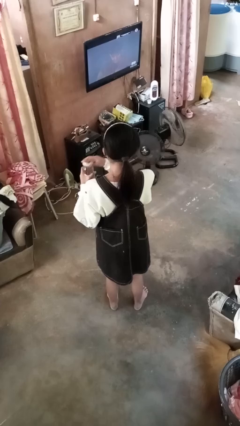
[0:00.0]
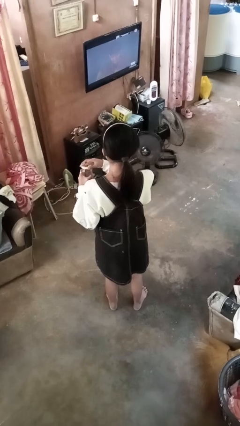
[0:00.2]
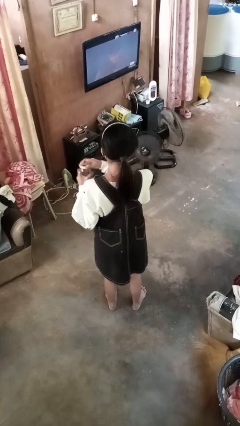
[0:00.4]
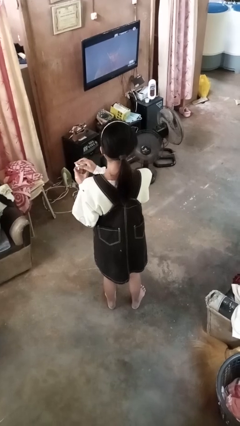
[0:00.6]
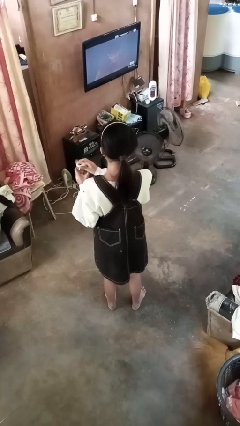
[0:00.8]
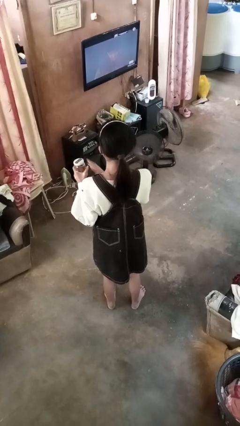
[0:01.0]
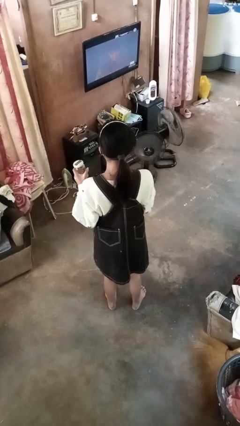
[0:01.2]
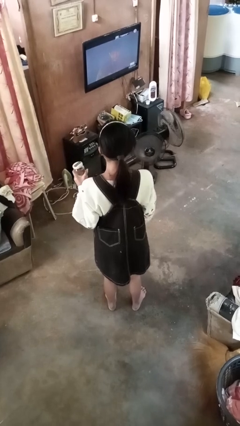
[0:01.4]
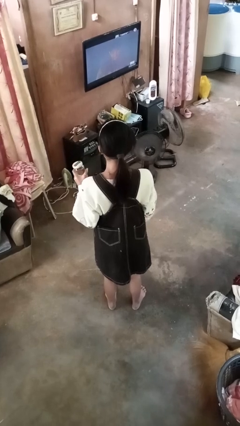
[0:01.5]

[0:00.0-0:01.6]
person closes jar

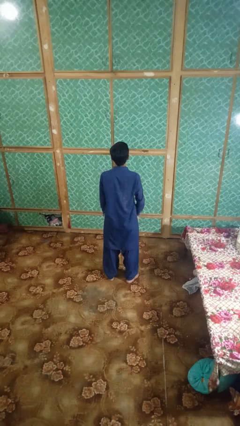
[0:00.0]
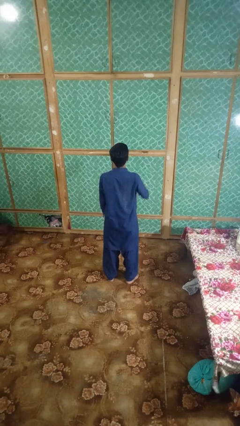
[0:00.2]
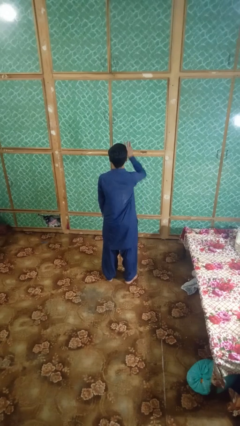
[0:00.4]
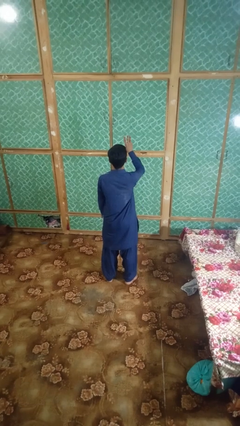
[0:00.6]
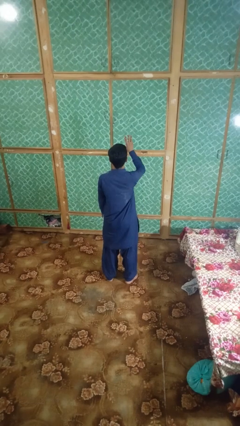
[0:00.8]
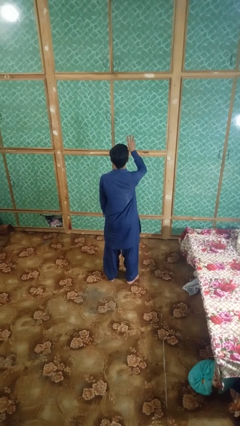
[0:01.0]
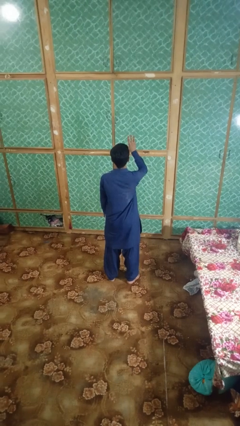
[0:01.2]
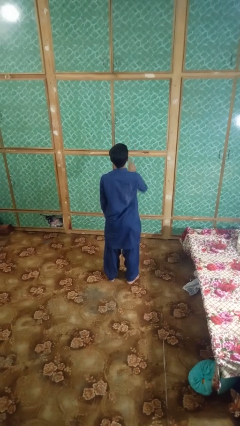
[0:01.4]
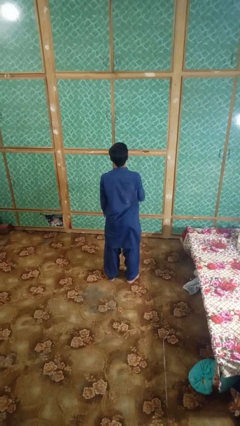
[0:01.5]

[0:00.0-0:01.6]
person gestures number three

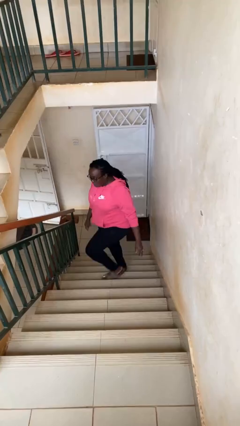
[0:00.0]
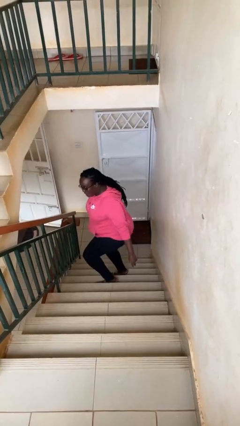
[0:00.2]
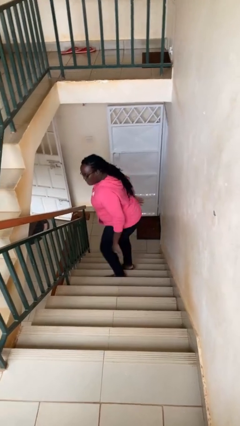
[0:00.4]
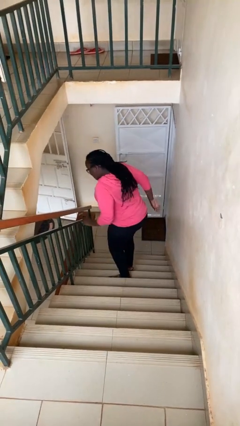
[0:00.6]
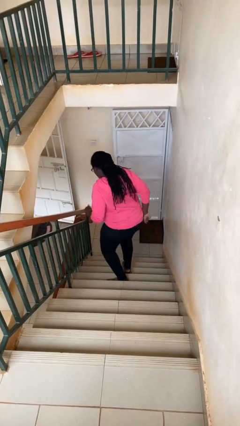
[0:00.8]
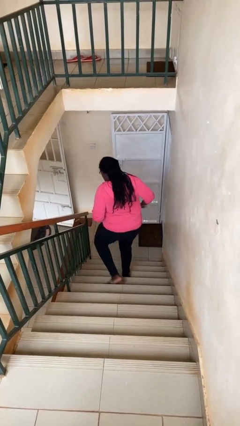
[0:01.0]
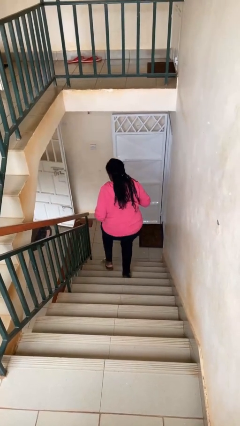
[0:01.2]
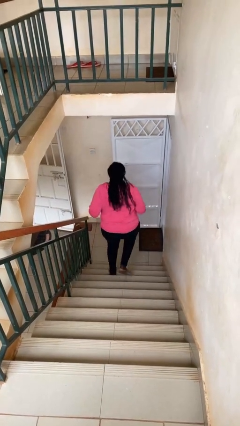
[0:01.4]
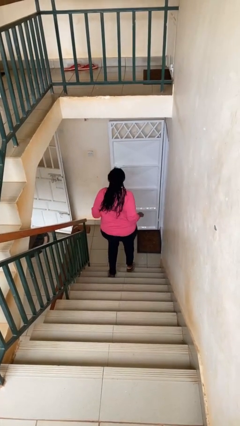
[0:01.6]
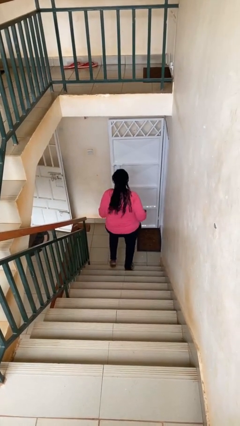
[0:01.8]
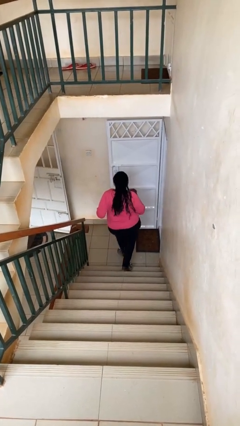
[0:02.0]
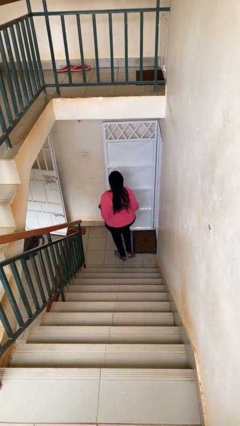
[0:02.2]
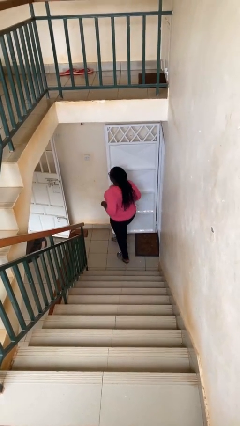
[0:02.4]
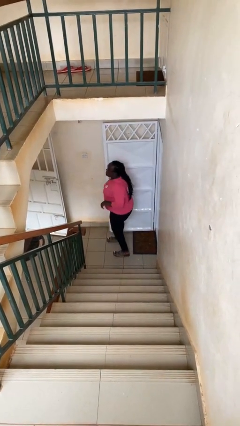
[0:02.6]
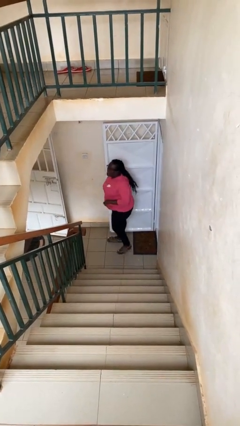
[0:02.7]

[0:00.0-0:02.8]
person climbs down stairs

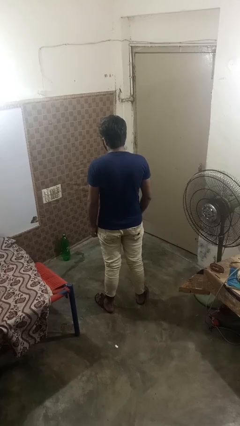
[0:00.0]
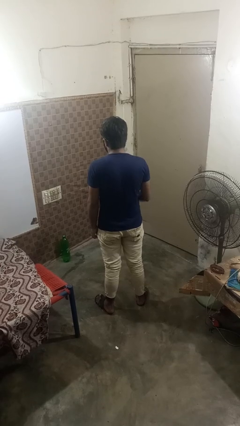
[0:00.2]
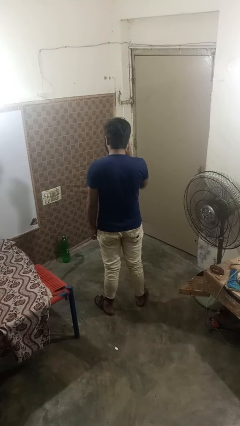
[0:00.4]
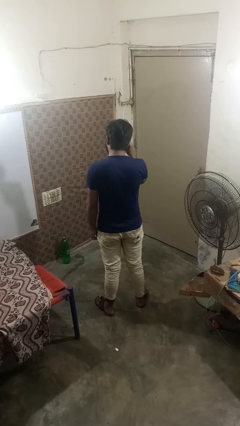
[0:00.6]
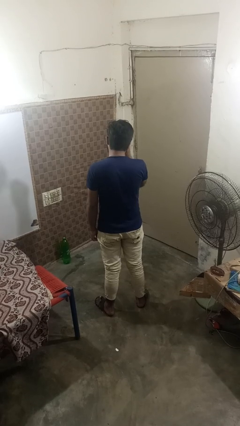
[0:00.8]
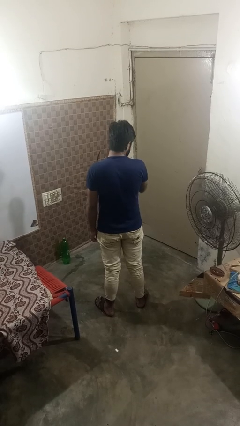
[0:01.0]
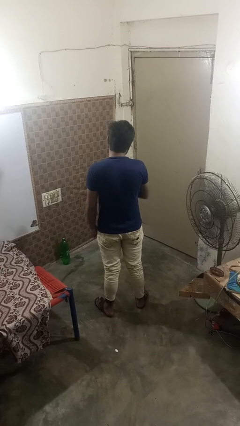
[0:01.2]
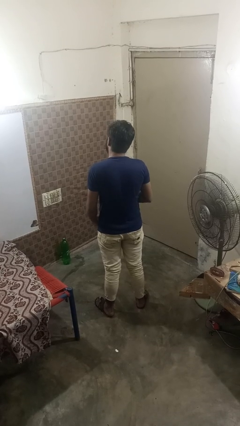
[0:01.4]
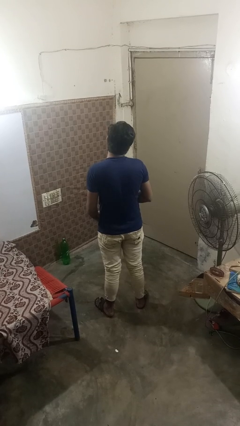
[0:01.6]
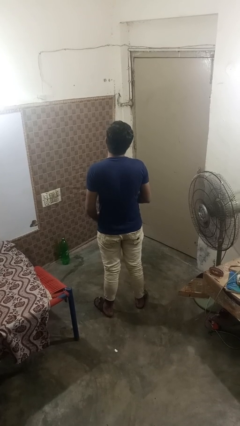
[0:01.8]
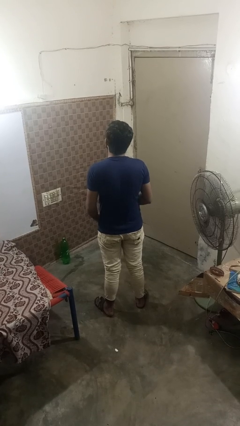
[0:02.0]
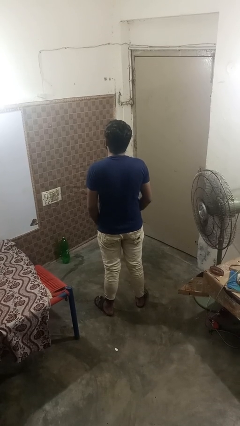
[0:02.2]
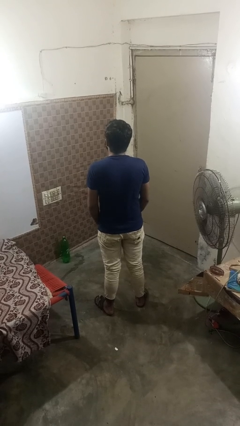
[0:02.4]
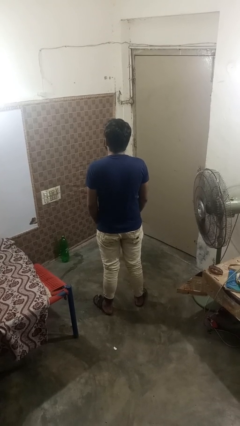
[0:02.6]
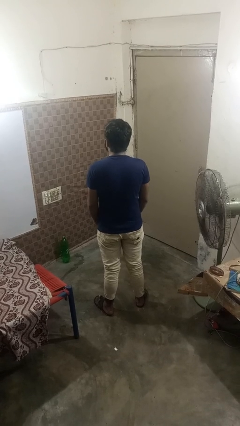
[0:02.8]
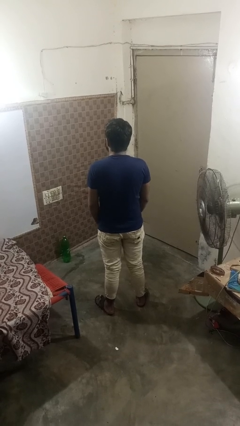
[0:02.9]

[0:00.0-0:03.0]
person takes off glasses

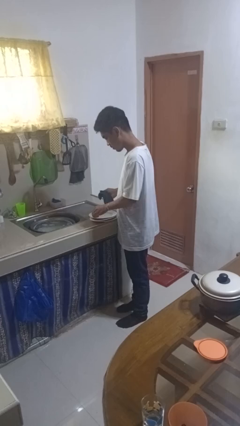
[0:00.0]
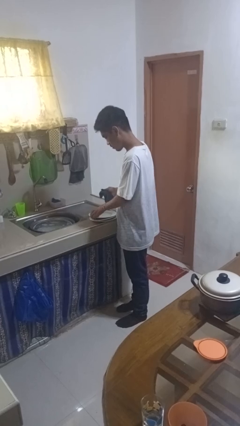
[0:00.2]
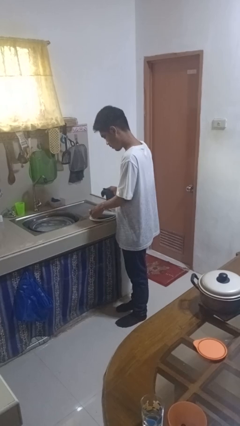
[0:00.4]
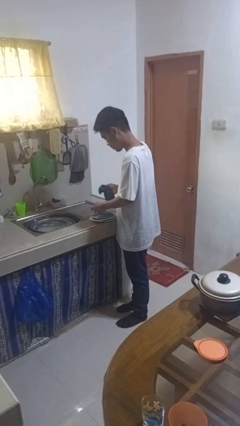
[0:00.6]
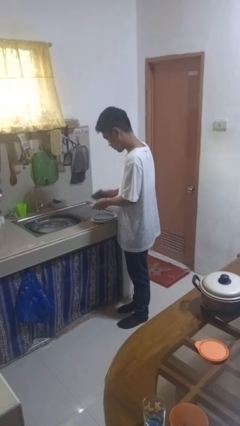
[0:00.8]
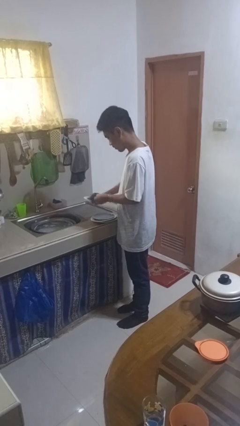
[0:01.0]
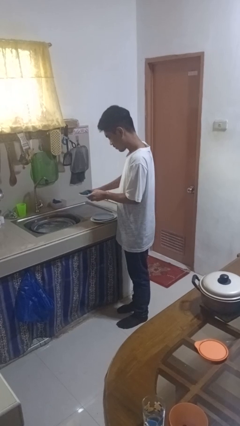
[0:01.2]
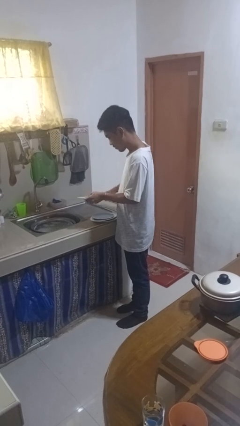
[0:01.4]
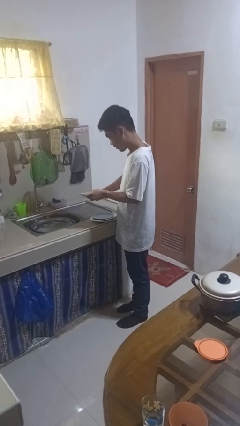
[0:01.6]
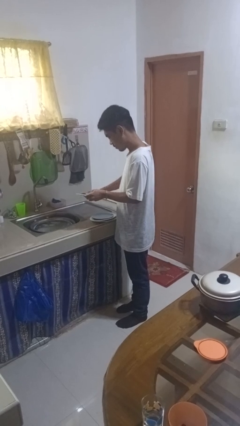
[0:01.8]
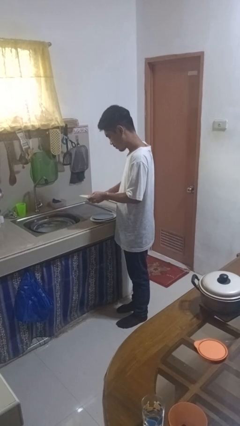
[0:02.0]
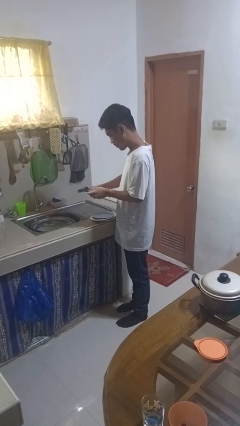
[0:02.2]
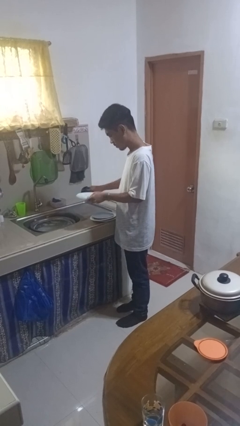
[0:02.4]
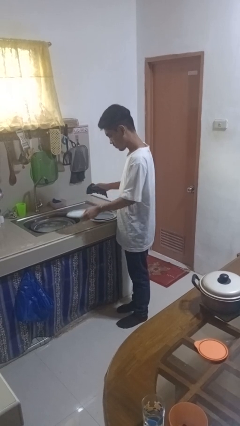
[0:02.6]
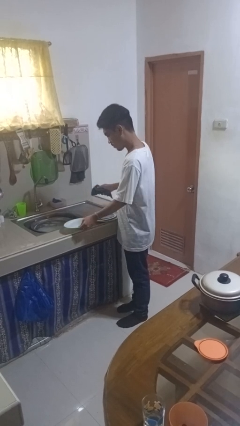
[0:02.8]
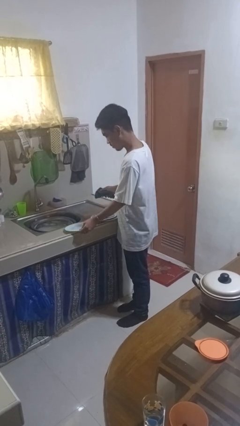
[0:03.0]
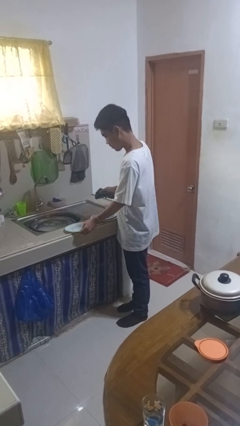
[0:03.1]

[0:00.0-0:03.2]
person dries dish

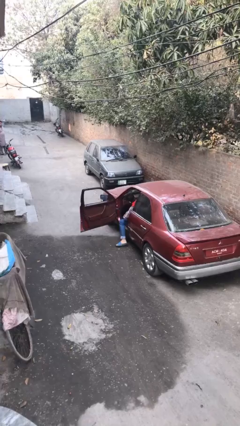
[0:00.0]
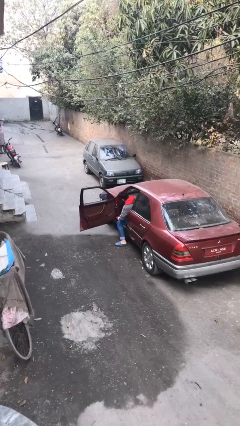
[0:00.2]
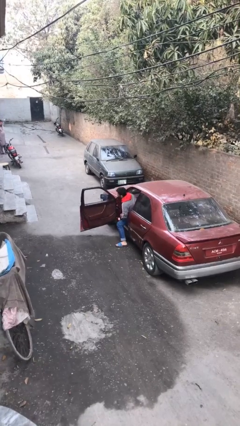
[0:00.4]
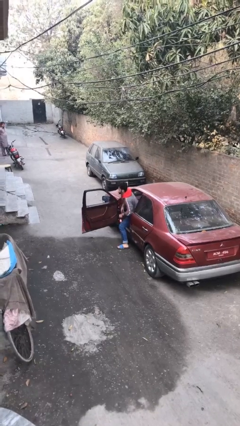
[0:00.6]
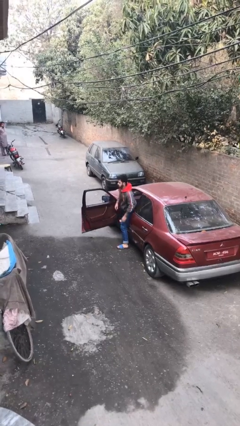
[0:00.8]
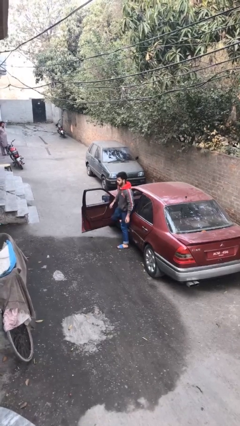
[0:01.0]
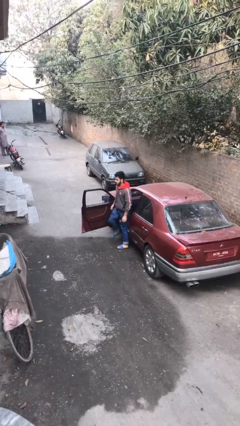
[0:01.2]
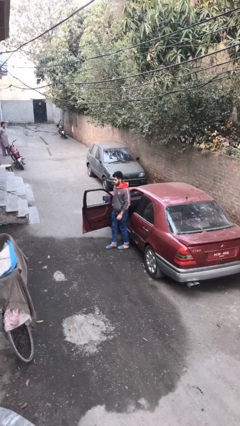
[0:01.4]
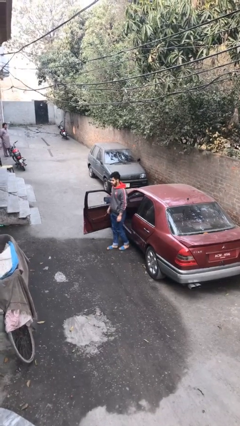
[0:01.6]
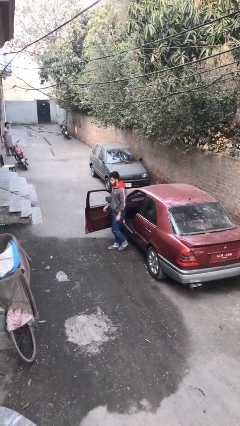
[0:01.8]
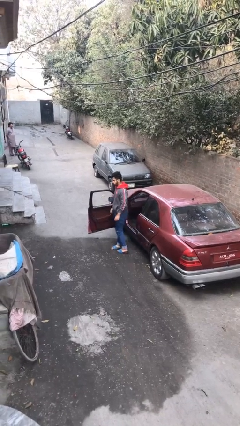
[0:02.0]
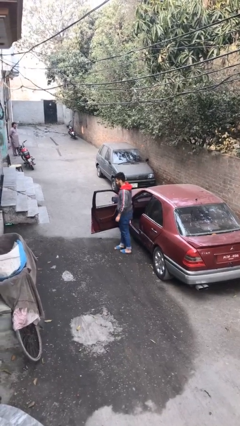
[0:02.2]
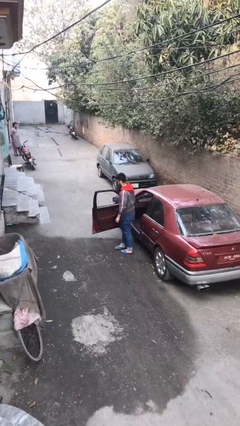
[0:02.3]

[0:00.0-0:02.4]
person exits car

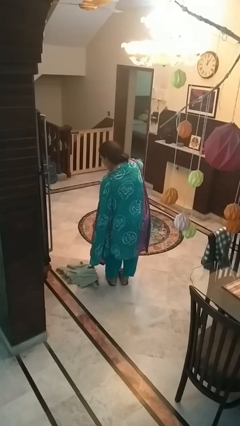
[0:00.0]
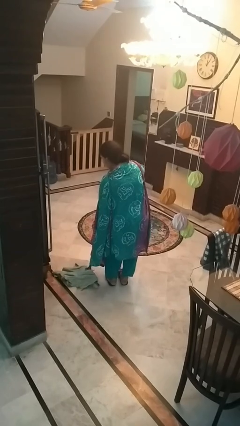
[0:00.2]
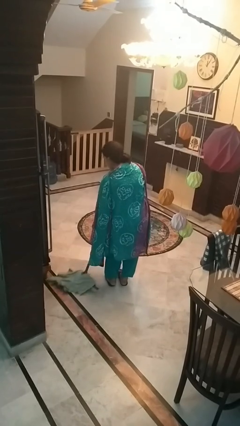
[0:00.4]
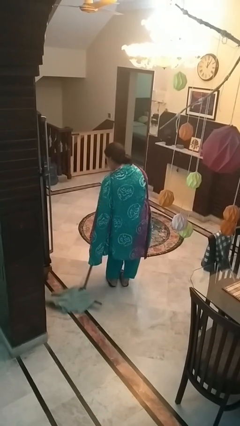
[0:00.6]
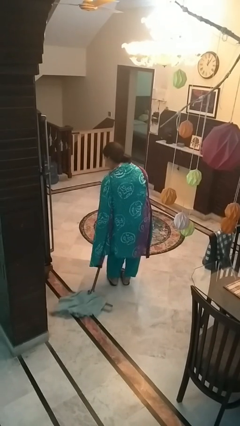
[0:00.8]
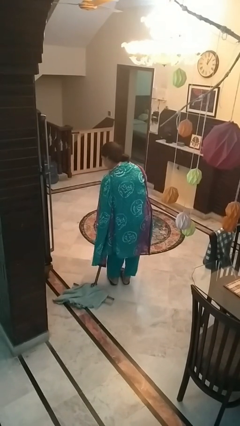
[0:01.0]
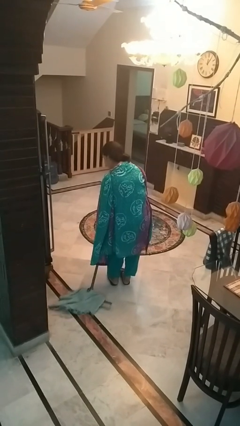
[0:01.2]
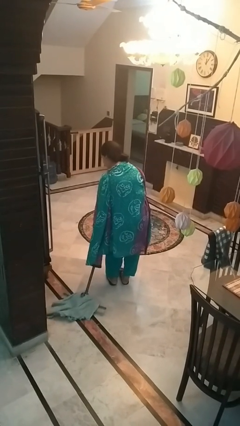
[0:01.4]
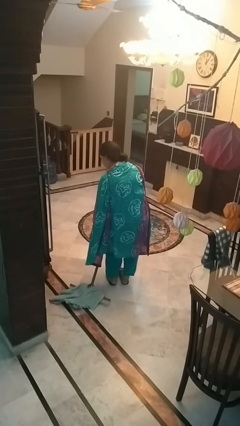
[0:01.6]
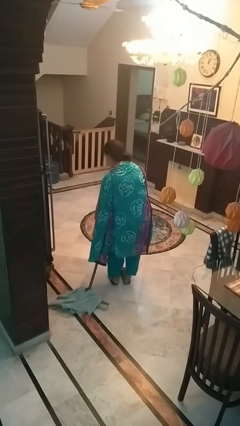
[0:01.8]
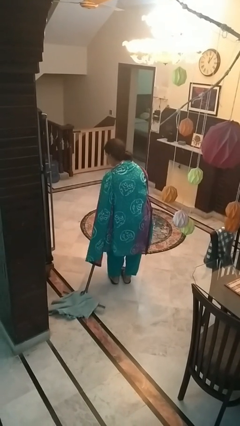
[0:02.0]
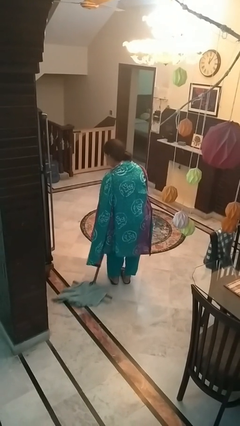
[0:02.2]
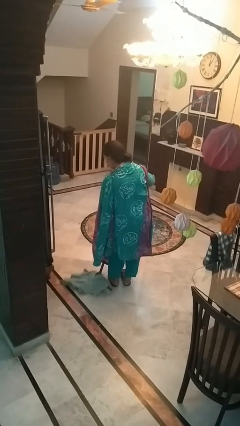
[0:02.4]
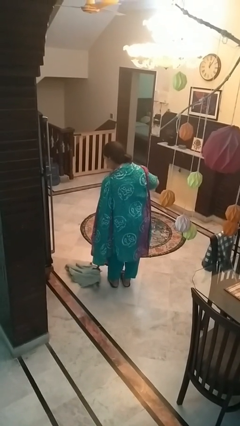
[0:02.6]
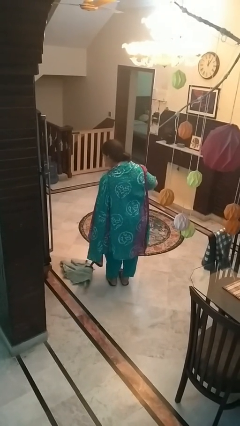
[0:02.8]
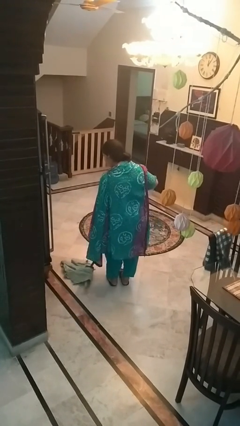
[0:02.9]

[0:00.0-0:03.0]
person mops
